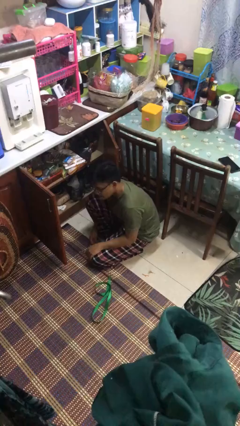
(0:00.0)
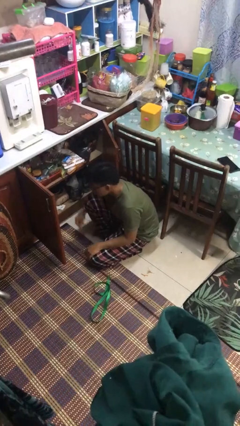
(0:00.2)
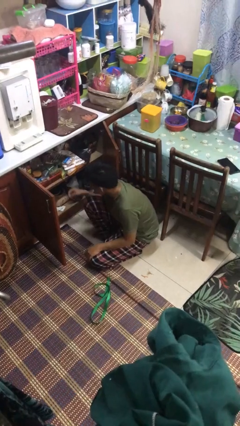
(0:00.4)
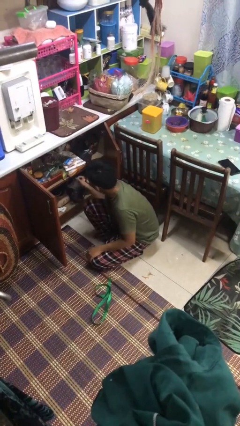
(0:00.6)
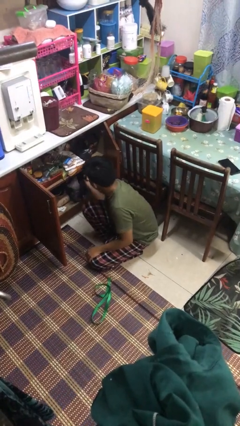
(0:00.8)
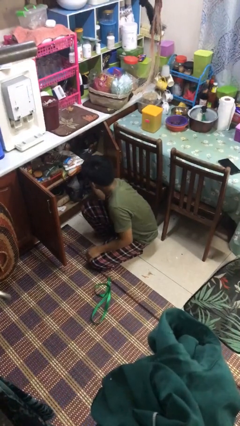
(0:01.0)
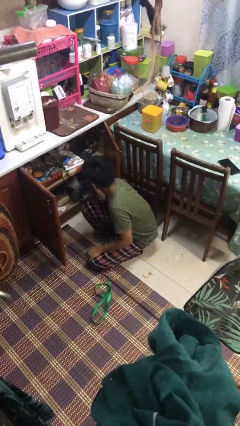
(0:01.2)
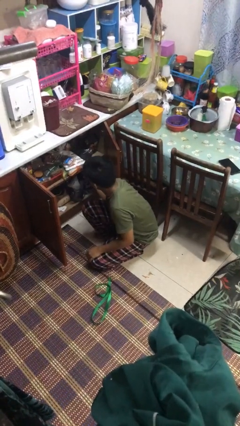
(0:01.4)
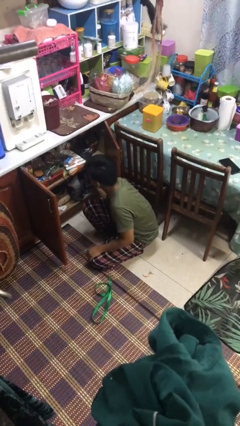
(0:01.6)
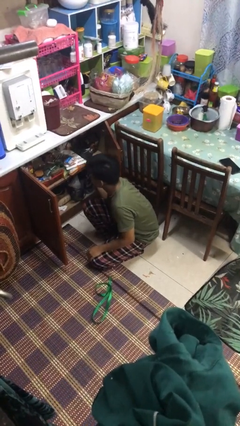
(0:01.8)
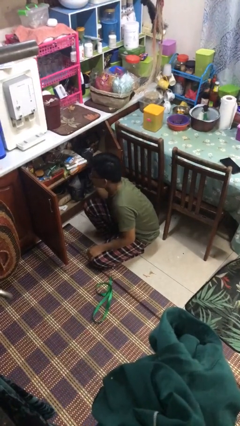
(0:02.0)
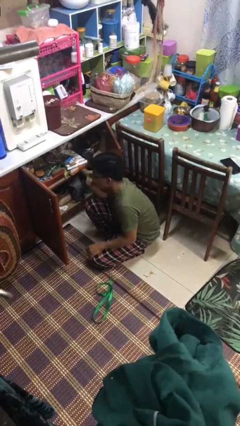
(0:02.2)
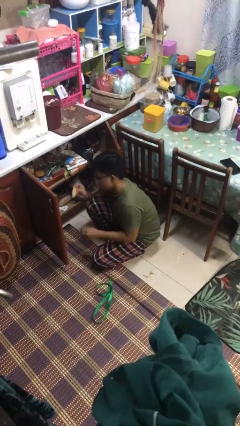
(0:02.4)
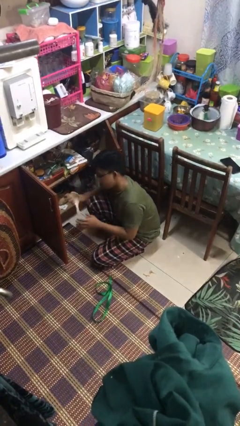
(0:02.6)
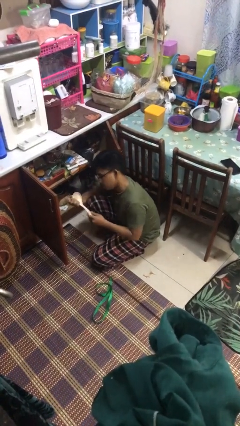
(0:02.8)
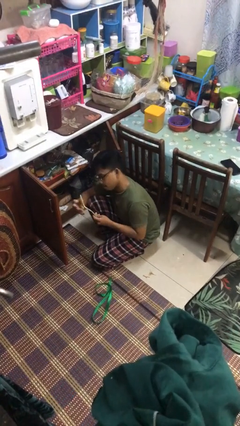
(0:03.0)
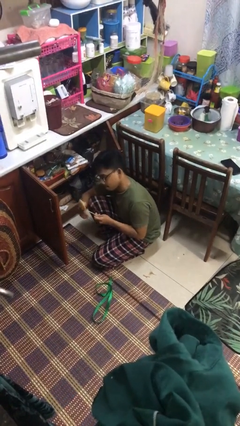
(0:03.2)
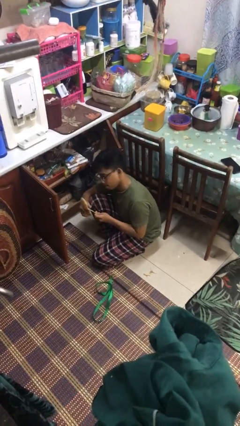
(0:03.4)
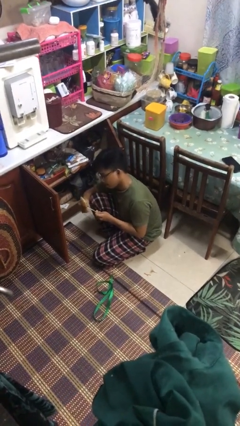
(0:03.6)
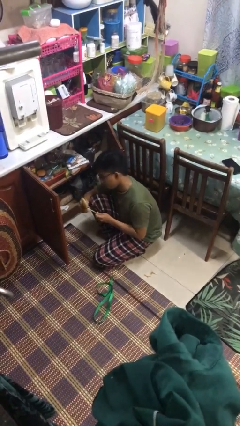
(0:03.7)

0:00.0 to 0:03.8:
person takes object from kitchen drawer

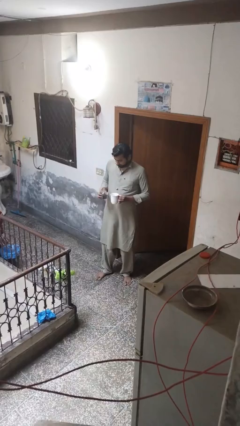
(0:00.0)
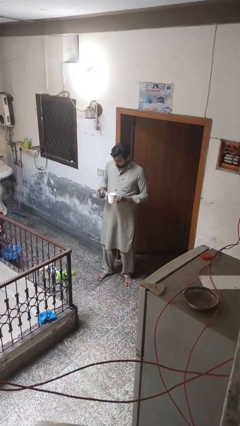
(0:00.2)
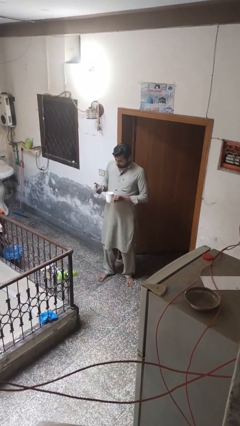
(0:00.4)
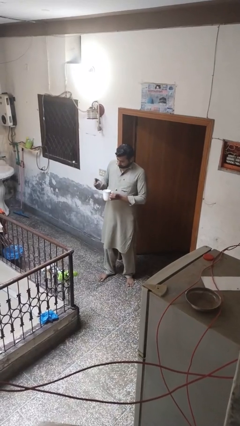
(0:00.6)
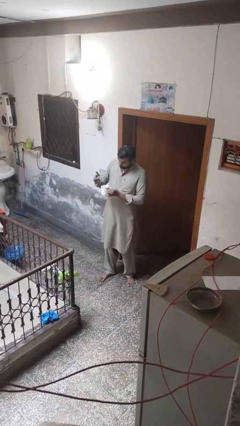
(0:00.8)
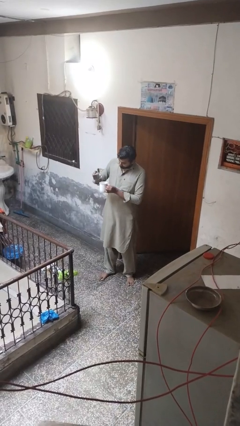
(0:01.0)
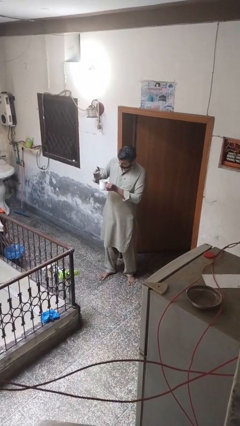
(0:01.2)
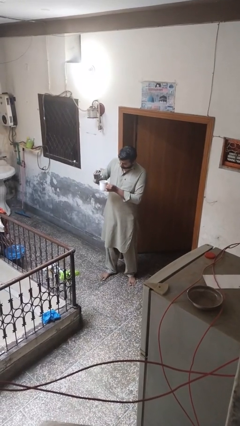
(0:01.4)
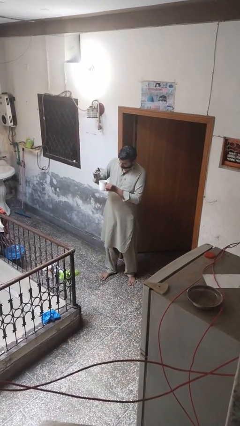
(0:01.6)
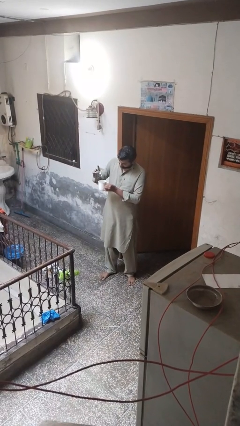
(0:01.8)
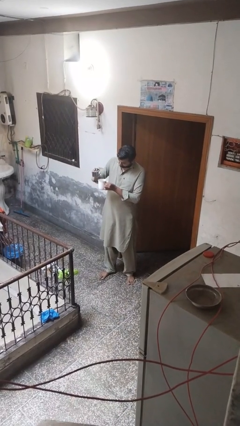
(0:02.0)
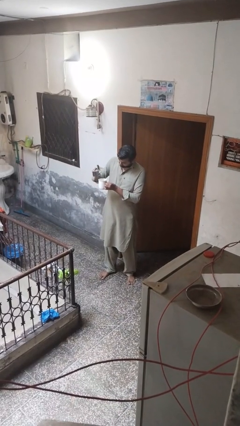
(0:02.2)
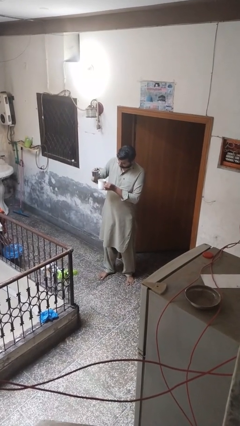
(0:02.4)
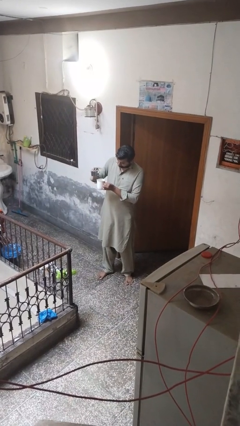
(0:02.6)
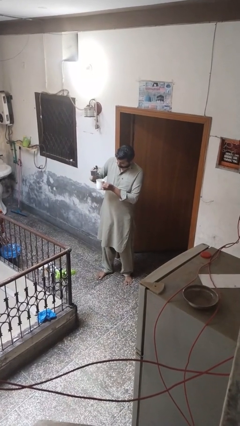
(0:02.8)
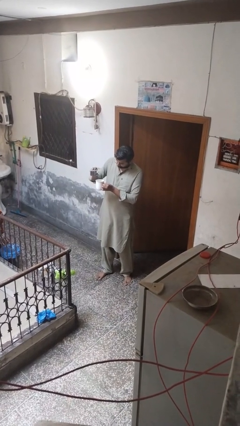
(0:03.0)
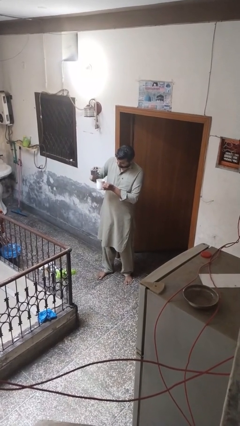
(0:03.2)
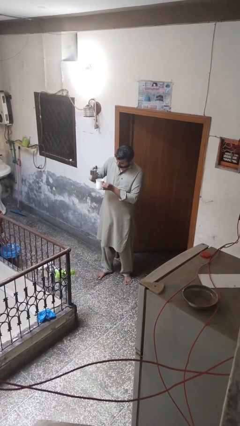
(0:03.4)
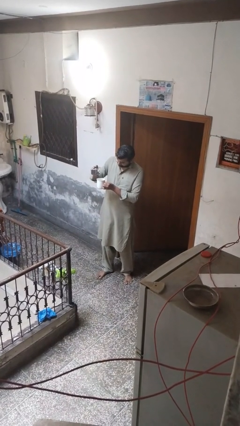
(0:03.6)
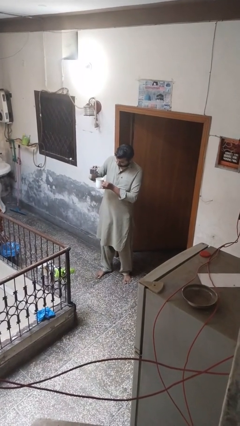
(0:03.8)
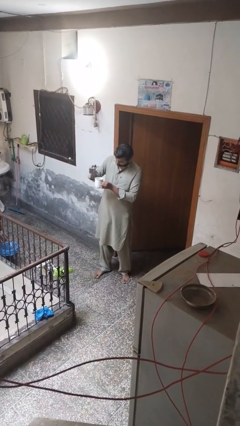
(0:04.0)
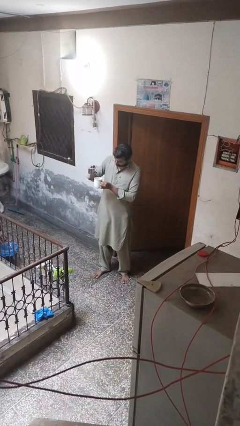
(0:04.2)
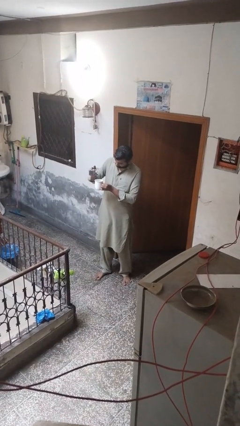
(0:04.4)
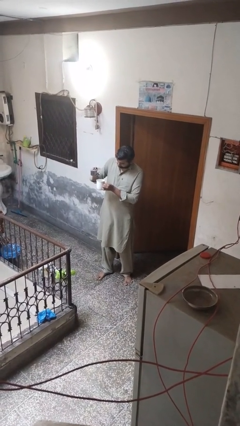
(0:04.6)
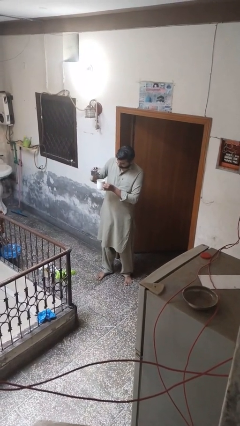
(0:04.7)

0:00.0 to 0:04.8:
person pours coffee into mug

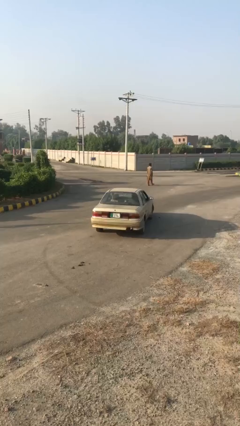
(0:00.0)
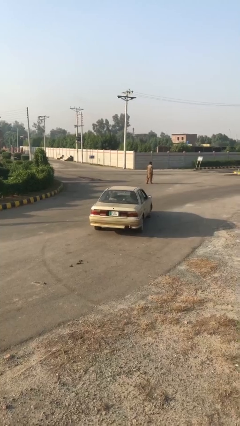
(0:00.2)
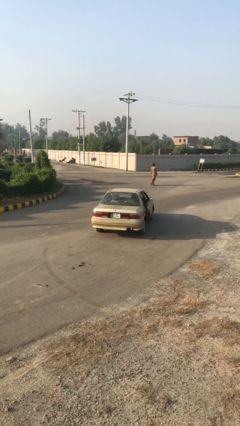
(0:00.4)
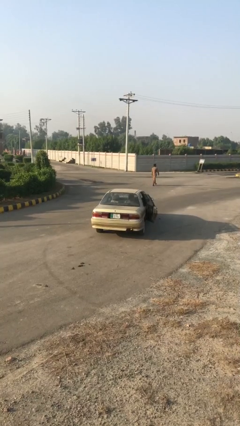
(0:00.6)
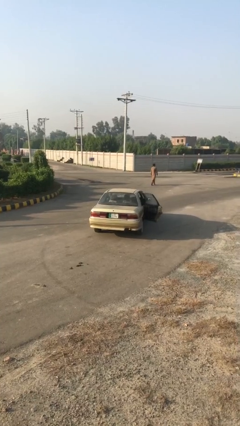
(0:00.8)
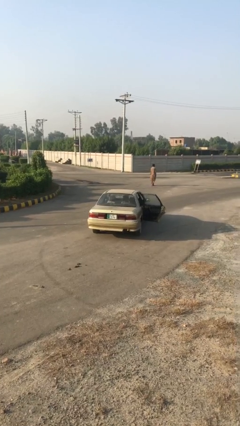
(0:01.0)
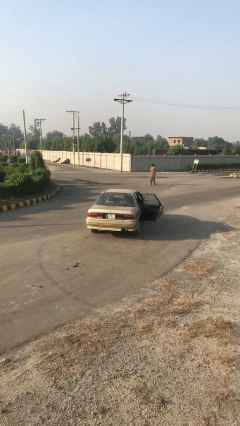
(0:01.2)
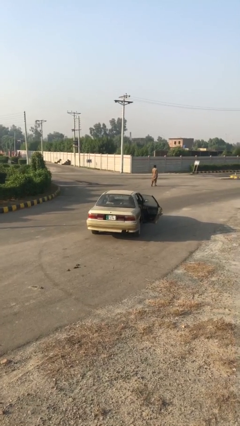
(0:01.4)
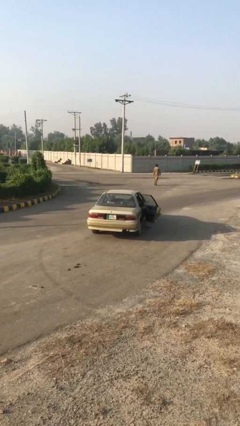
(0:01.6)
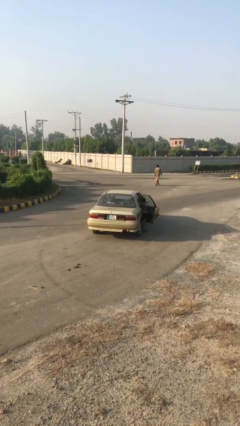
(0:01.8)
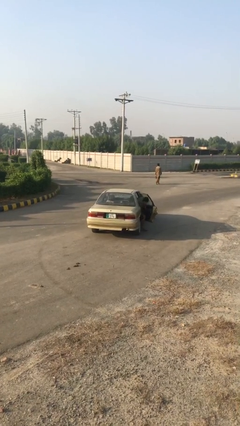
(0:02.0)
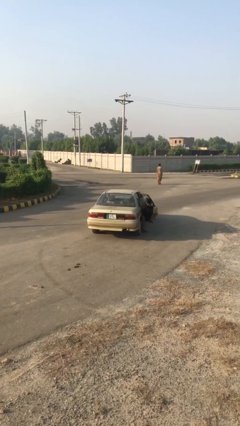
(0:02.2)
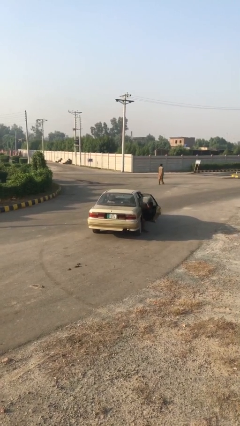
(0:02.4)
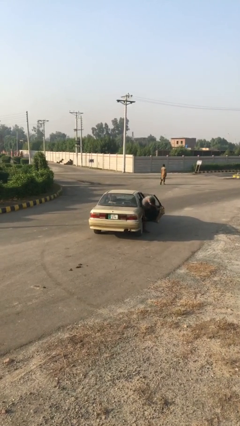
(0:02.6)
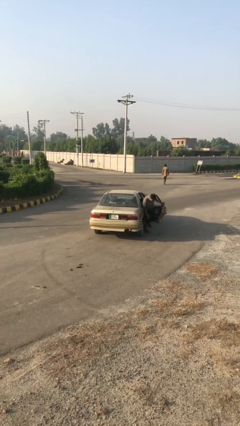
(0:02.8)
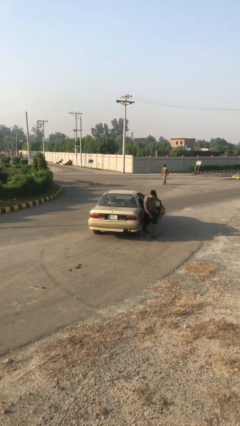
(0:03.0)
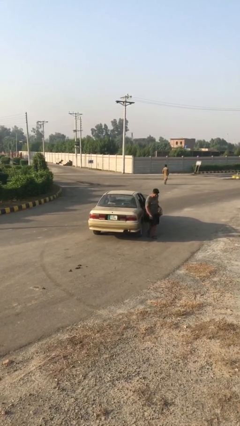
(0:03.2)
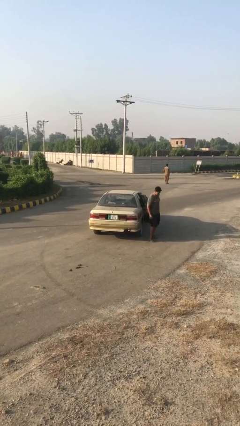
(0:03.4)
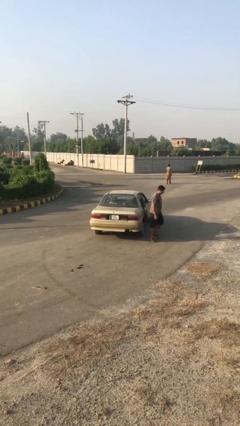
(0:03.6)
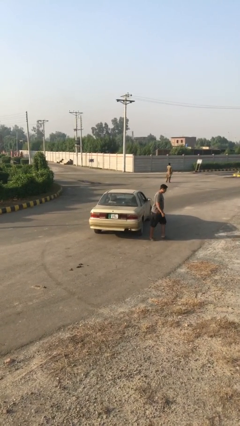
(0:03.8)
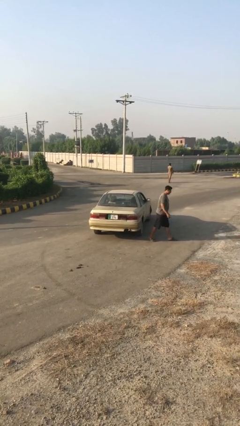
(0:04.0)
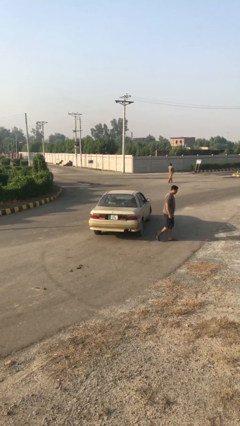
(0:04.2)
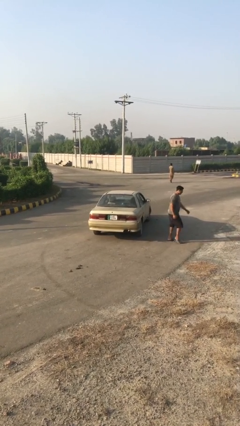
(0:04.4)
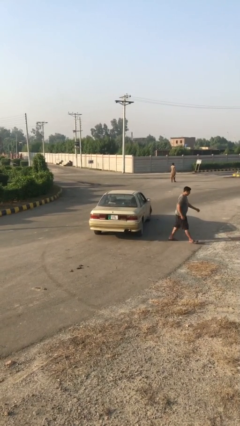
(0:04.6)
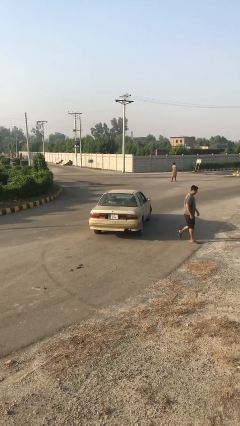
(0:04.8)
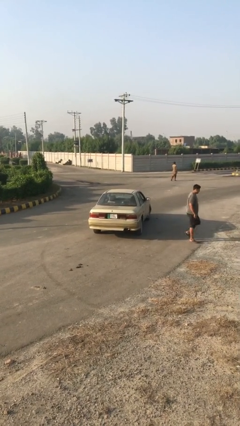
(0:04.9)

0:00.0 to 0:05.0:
car drops off person

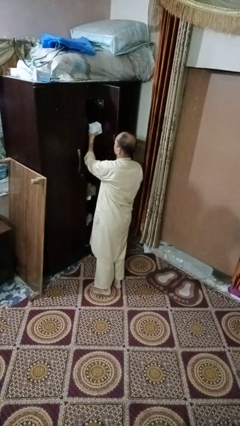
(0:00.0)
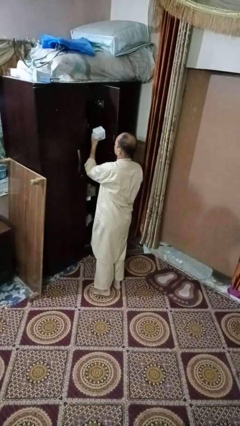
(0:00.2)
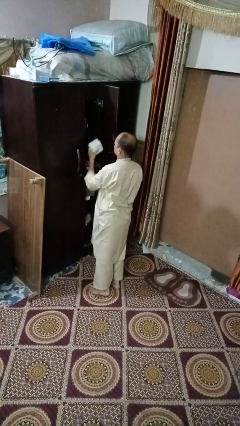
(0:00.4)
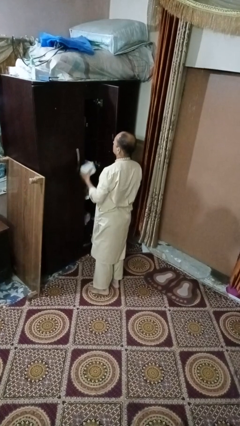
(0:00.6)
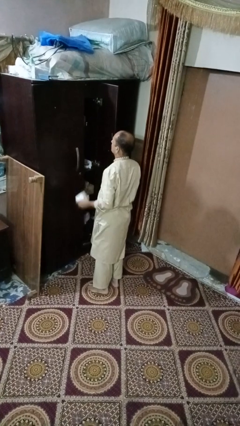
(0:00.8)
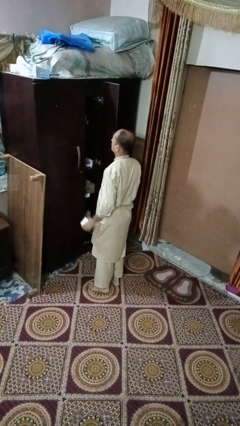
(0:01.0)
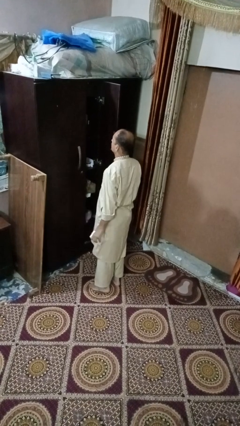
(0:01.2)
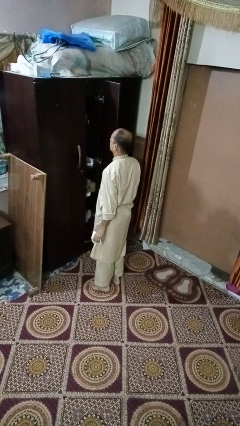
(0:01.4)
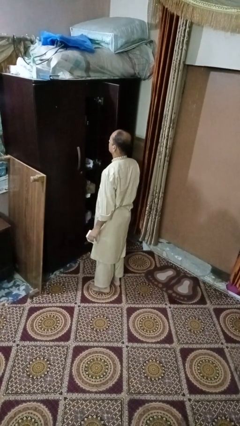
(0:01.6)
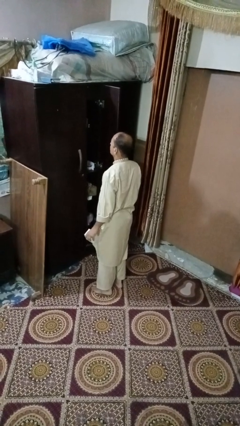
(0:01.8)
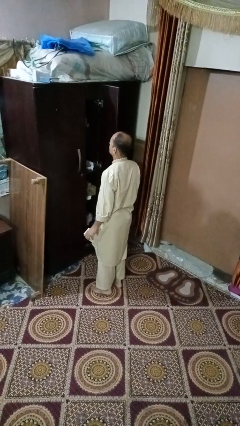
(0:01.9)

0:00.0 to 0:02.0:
person puts down object into cabinet

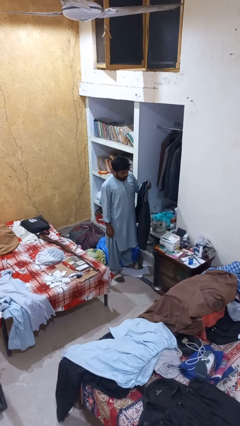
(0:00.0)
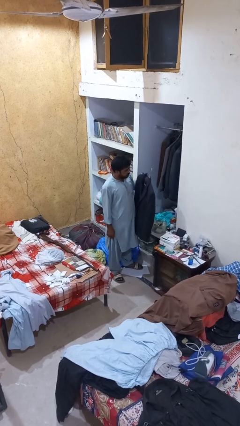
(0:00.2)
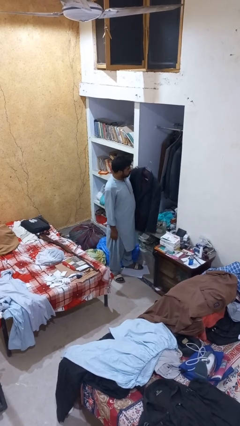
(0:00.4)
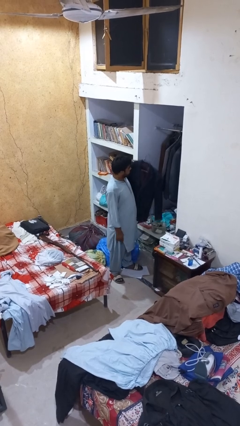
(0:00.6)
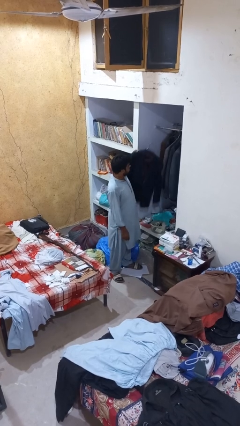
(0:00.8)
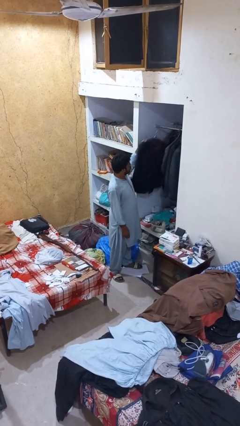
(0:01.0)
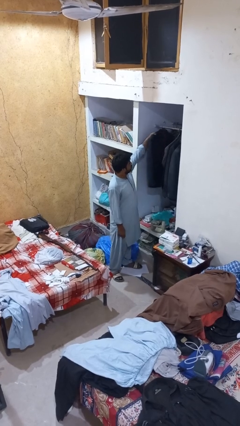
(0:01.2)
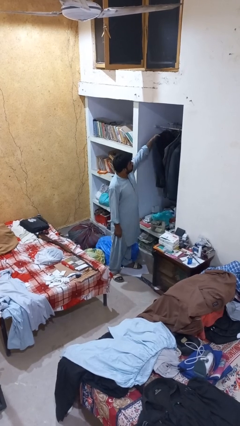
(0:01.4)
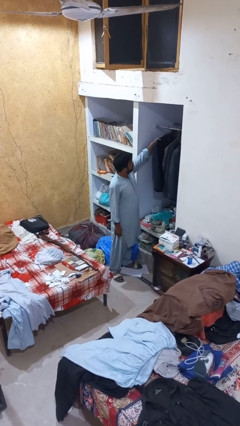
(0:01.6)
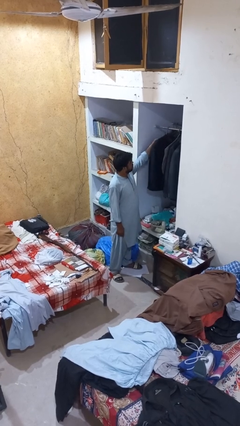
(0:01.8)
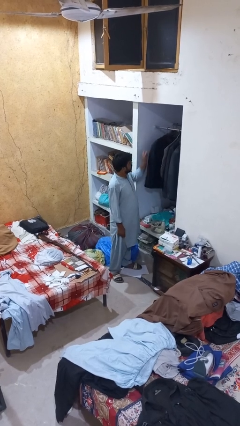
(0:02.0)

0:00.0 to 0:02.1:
person puts clothes into closet

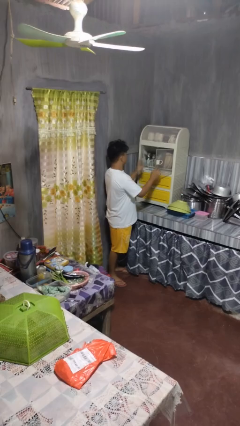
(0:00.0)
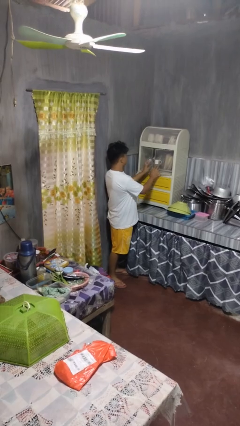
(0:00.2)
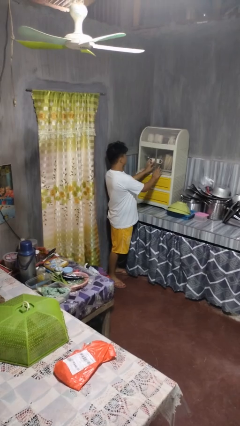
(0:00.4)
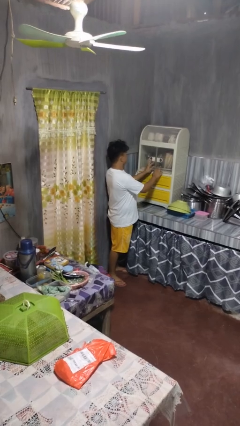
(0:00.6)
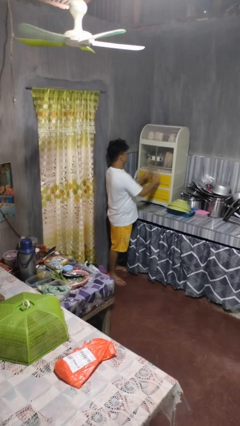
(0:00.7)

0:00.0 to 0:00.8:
person closes cabinet
